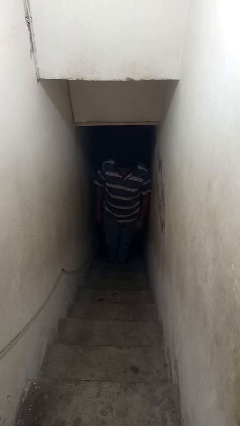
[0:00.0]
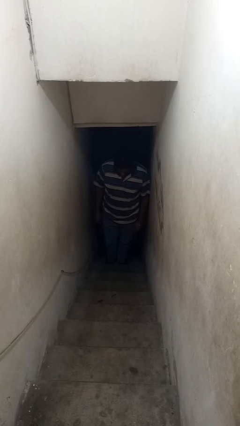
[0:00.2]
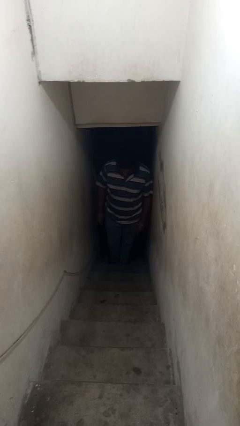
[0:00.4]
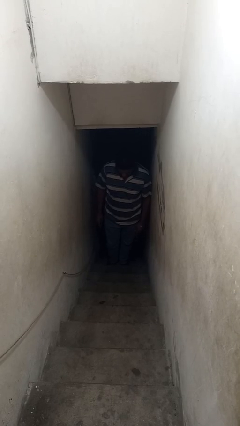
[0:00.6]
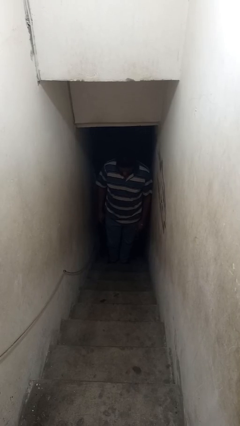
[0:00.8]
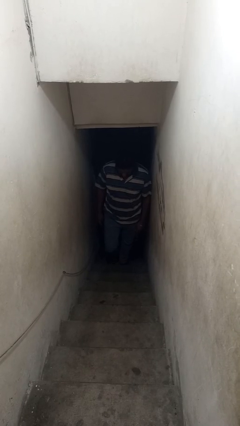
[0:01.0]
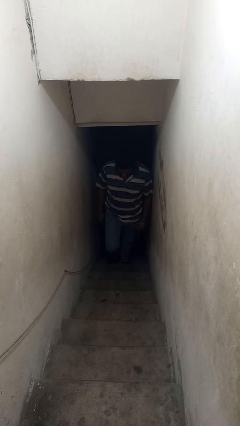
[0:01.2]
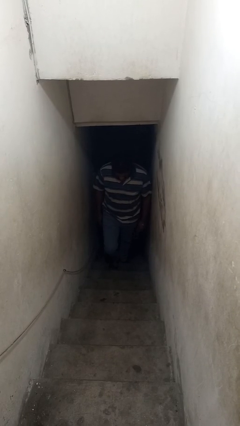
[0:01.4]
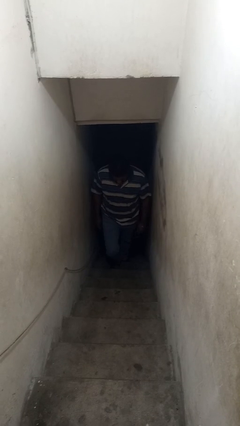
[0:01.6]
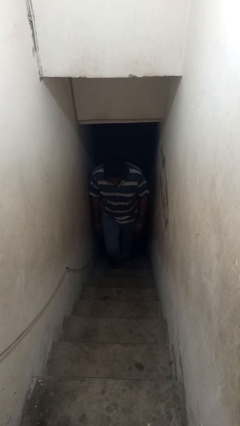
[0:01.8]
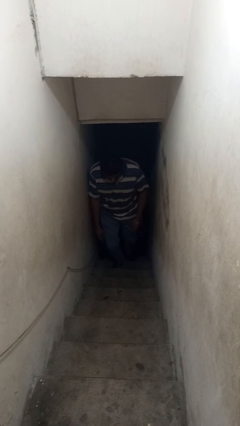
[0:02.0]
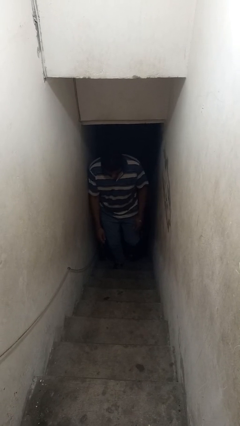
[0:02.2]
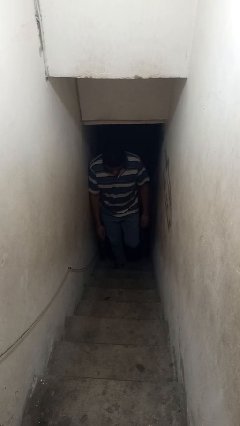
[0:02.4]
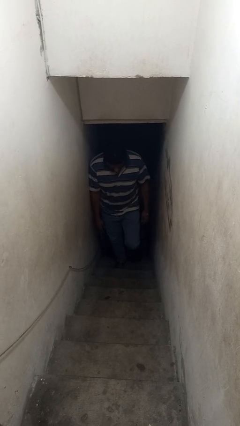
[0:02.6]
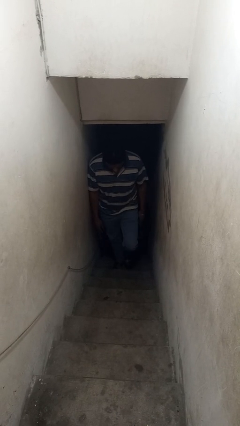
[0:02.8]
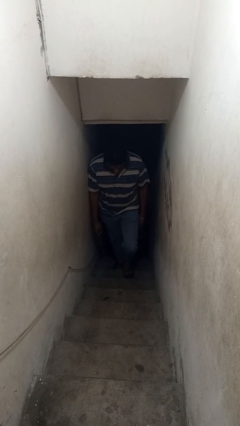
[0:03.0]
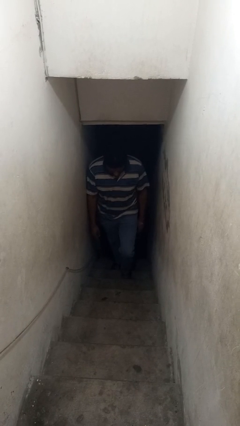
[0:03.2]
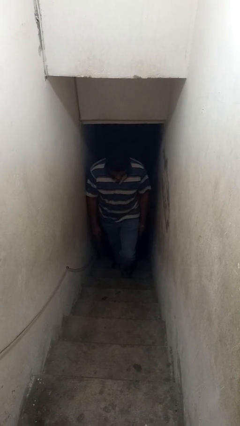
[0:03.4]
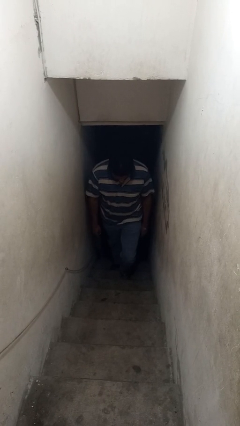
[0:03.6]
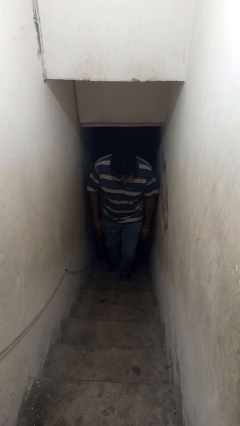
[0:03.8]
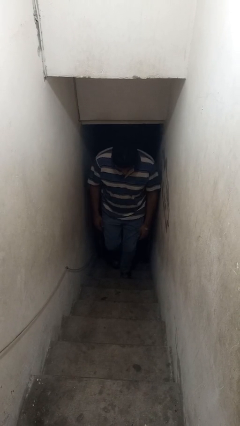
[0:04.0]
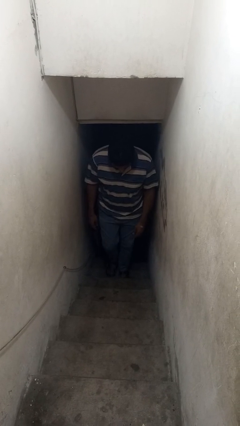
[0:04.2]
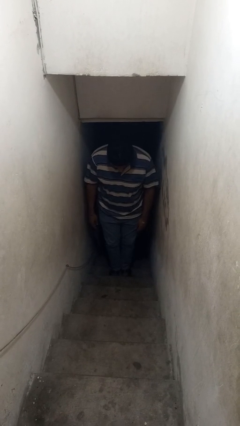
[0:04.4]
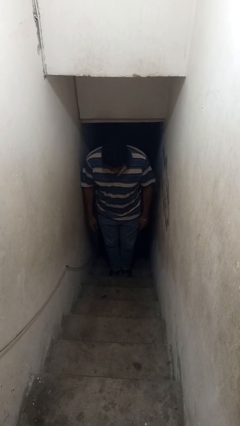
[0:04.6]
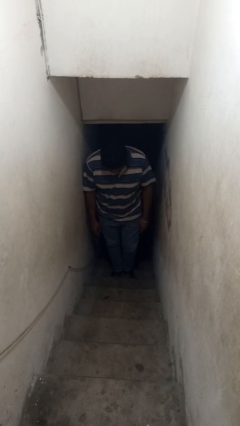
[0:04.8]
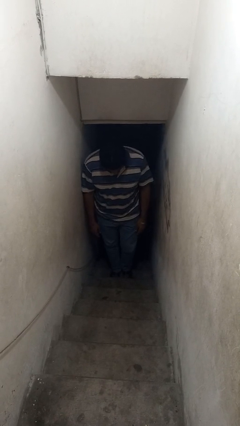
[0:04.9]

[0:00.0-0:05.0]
person climbs up stairs

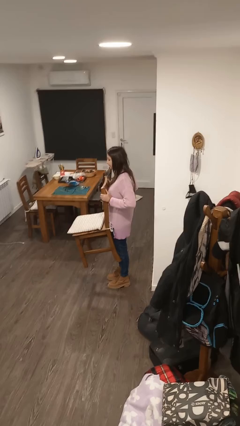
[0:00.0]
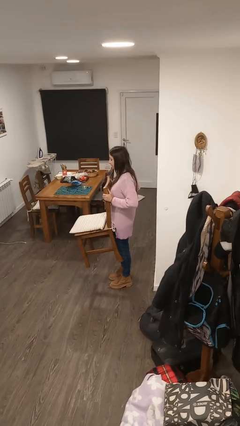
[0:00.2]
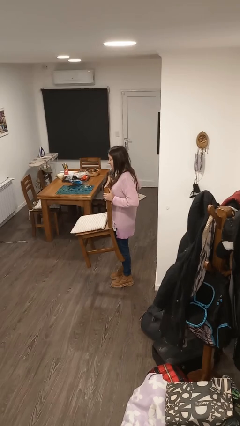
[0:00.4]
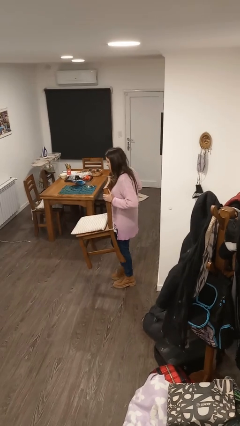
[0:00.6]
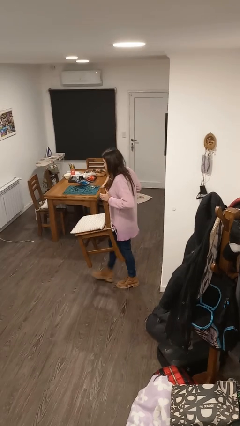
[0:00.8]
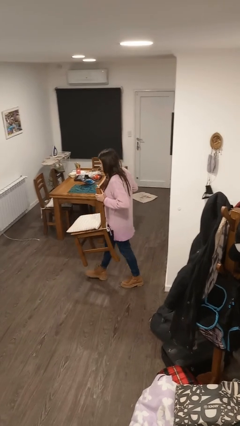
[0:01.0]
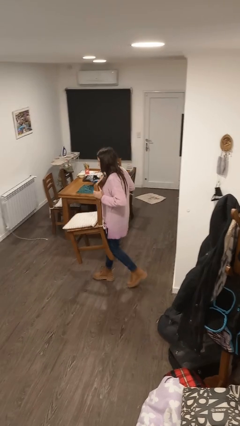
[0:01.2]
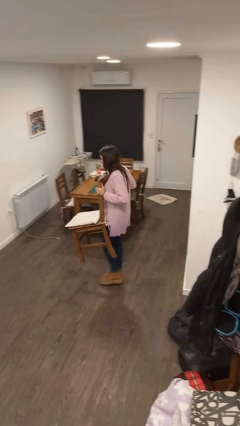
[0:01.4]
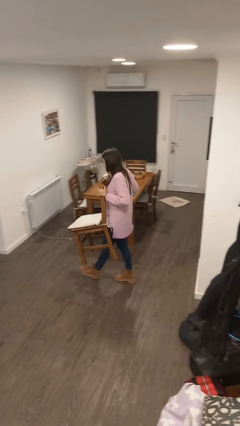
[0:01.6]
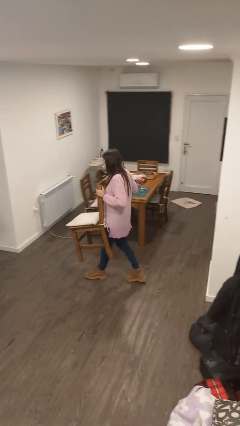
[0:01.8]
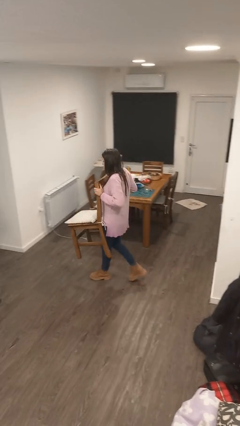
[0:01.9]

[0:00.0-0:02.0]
person carries furniture

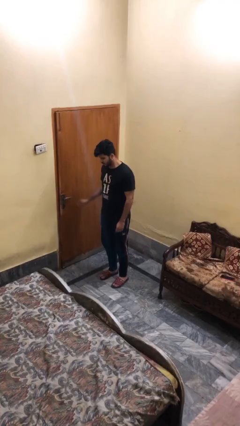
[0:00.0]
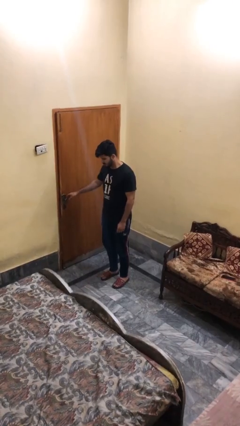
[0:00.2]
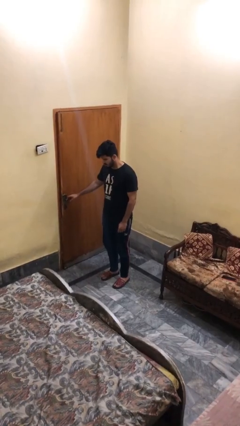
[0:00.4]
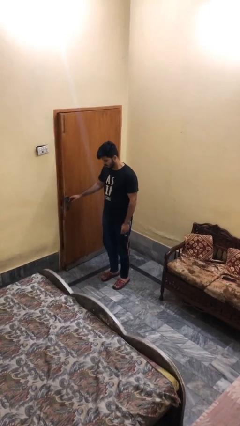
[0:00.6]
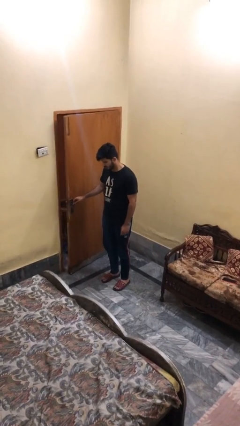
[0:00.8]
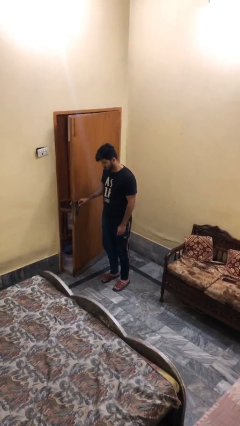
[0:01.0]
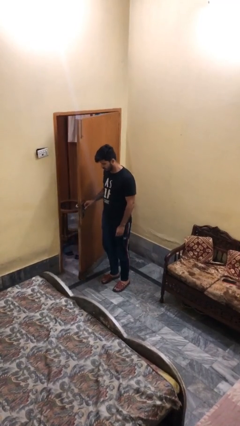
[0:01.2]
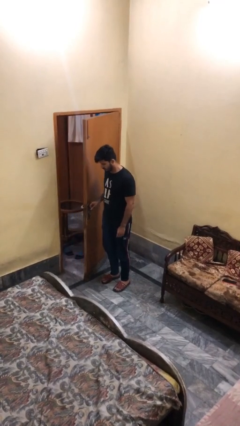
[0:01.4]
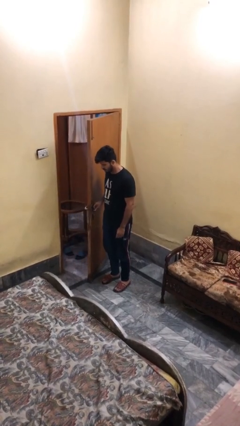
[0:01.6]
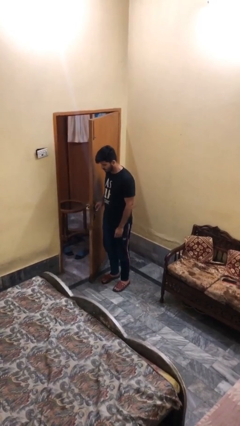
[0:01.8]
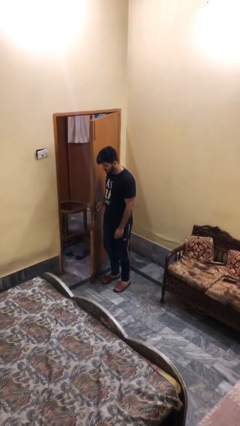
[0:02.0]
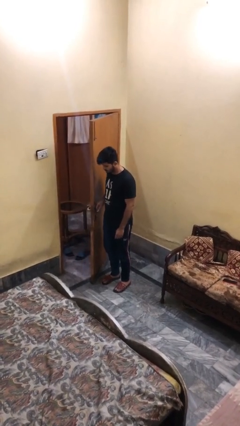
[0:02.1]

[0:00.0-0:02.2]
person opens facility door

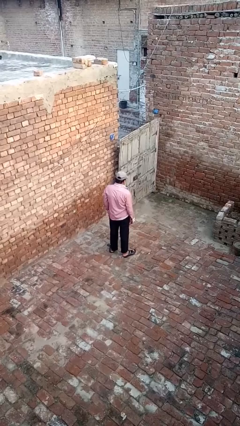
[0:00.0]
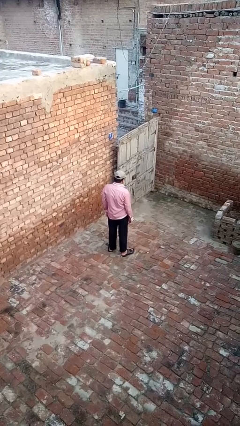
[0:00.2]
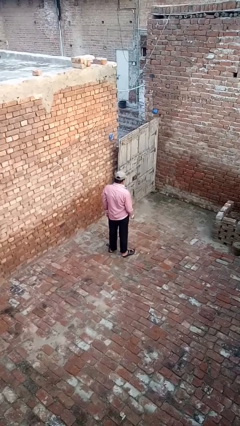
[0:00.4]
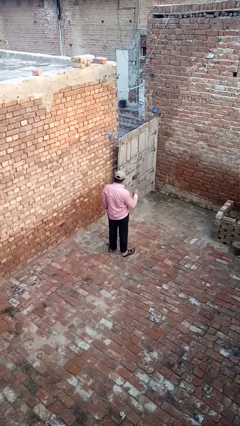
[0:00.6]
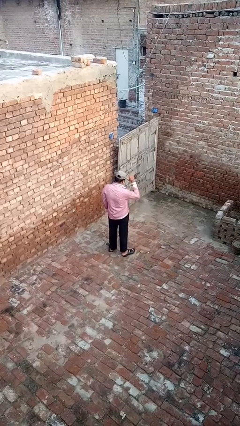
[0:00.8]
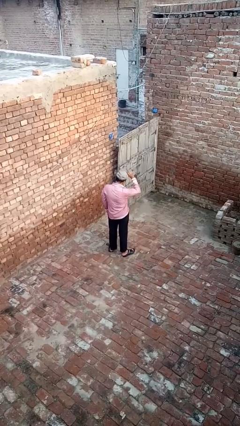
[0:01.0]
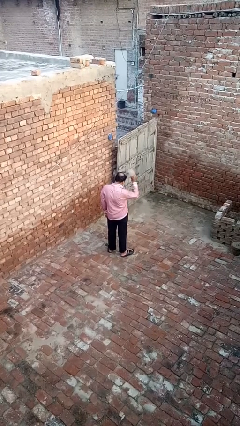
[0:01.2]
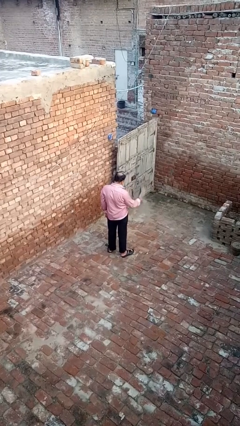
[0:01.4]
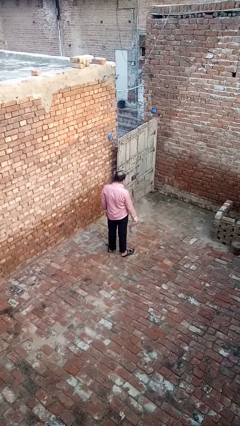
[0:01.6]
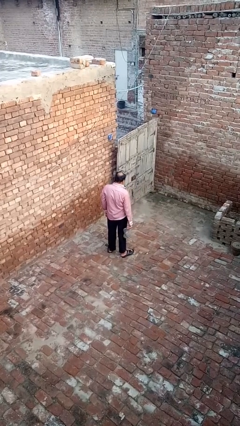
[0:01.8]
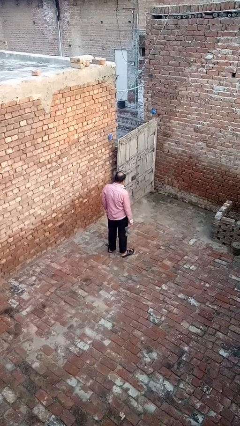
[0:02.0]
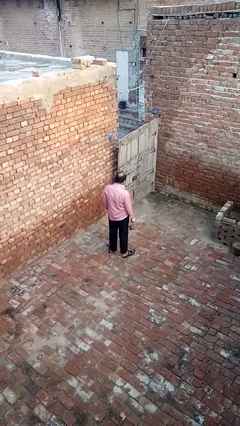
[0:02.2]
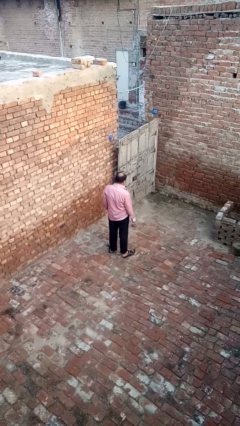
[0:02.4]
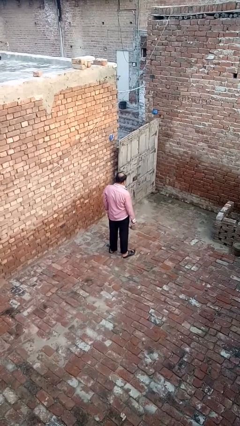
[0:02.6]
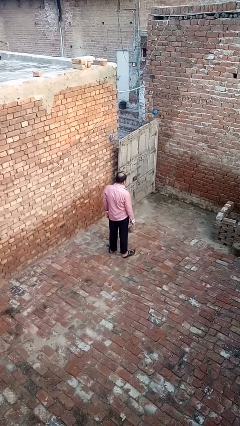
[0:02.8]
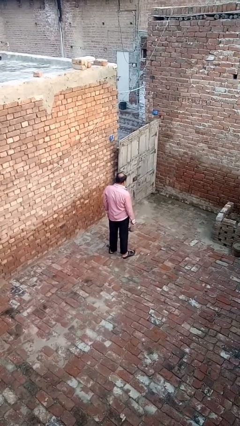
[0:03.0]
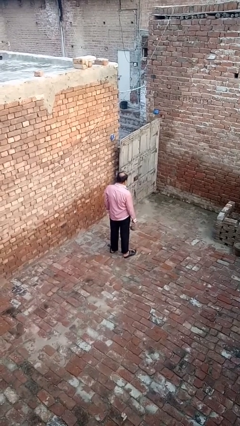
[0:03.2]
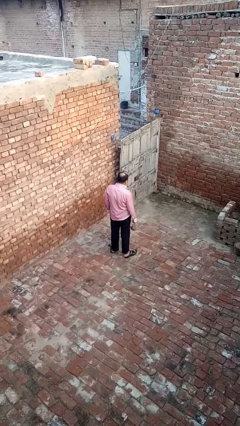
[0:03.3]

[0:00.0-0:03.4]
person takes off hat

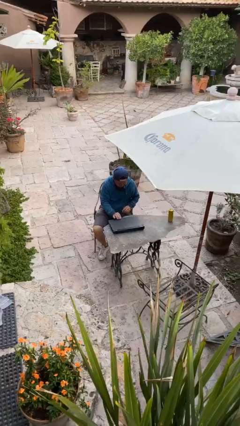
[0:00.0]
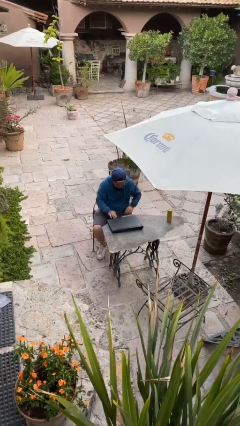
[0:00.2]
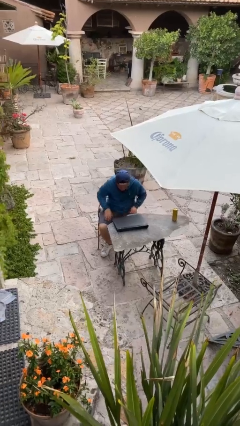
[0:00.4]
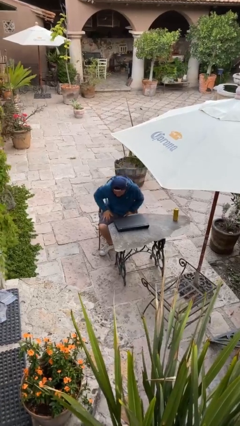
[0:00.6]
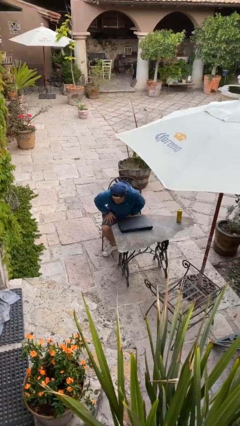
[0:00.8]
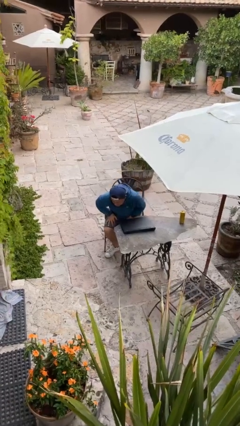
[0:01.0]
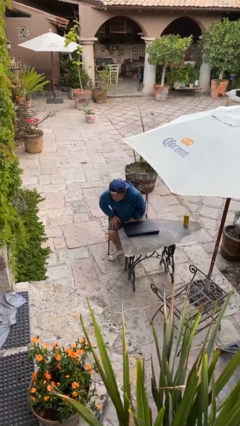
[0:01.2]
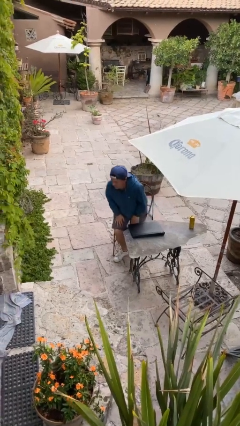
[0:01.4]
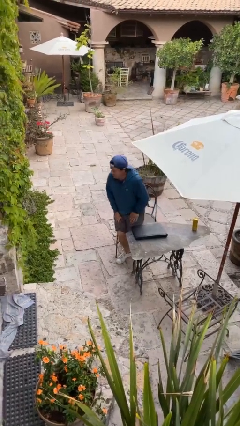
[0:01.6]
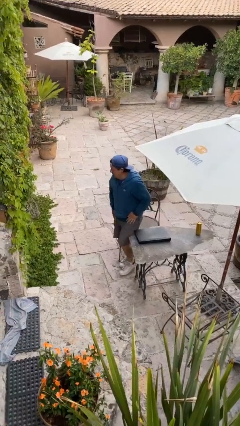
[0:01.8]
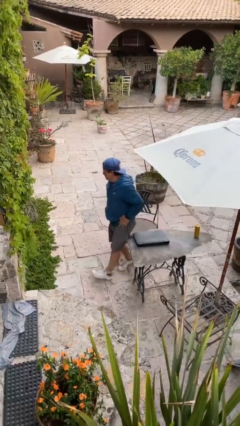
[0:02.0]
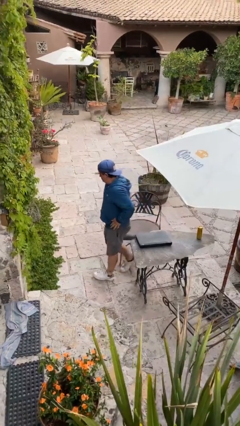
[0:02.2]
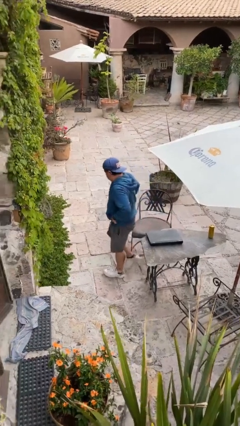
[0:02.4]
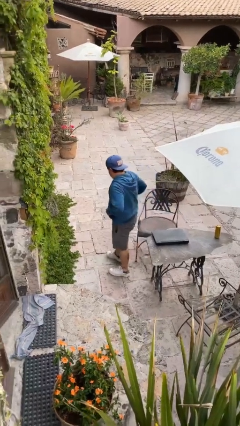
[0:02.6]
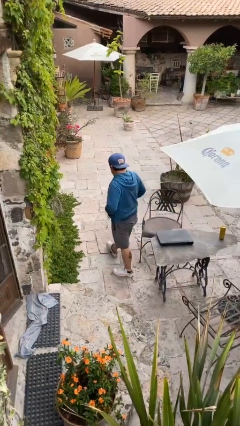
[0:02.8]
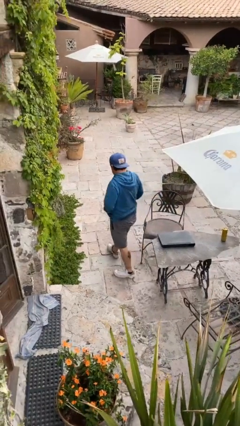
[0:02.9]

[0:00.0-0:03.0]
person stands up

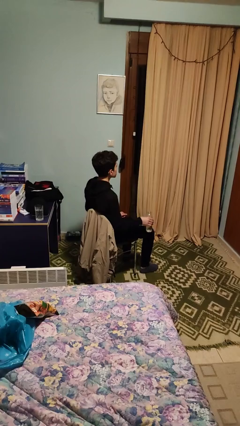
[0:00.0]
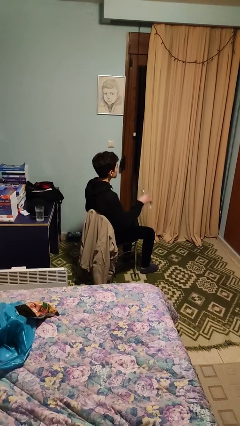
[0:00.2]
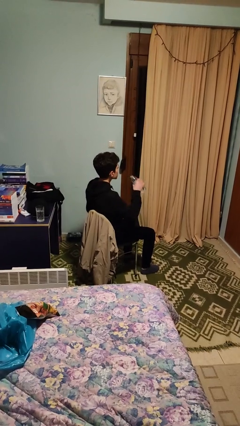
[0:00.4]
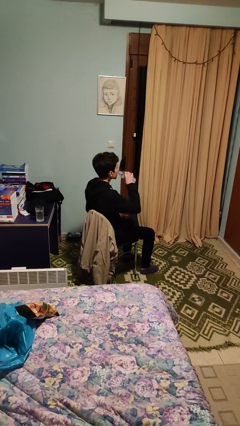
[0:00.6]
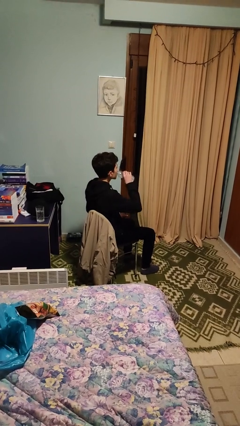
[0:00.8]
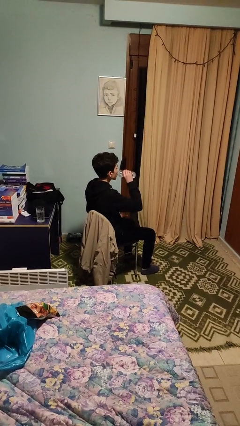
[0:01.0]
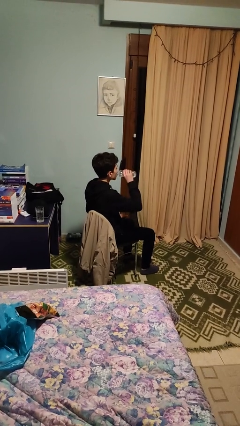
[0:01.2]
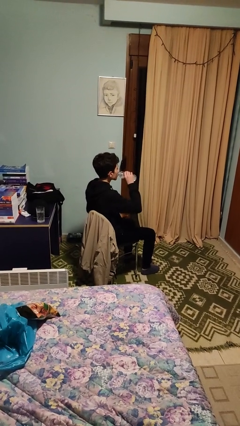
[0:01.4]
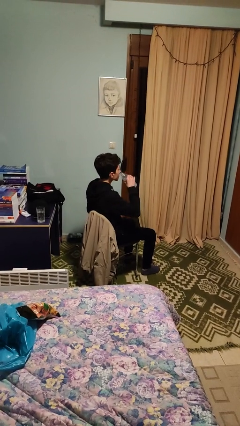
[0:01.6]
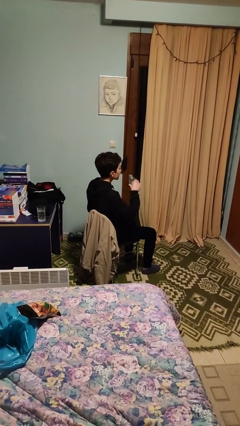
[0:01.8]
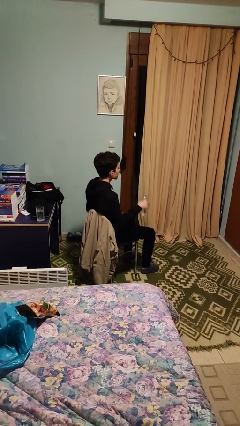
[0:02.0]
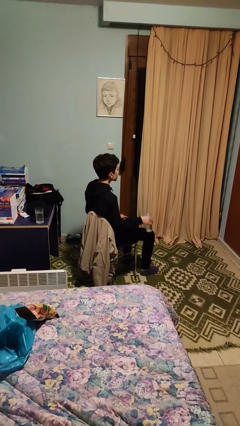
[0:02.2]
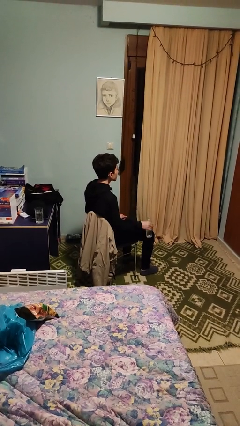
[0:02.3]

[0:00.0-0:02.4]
person drinks from bottle
